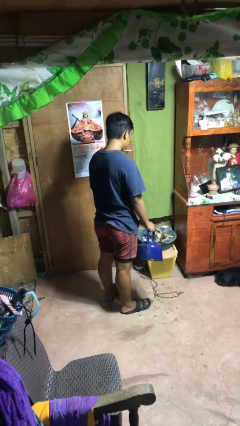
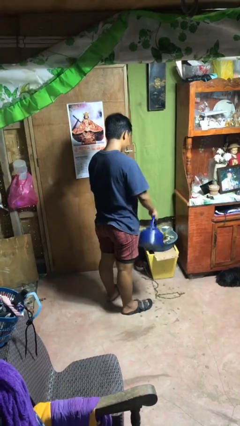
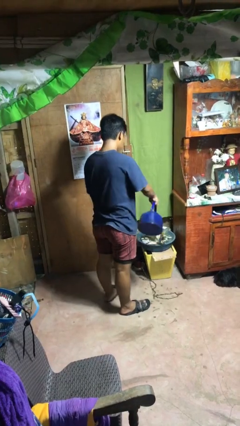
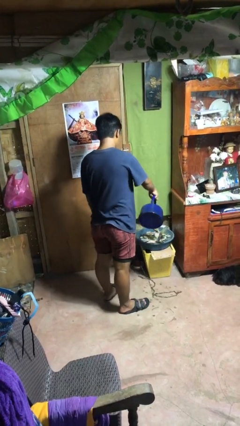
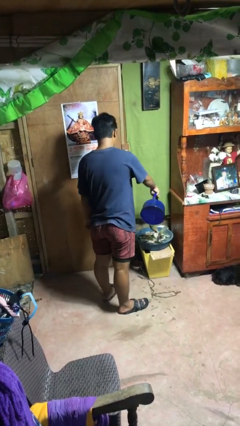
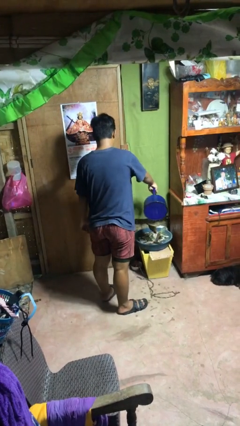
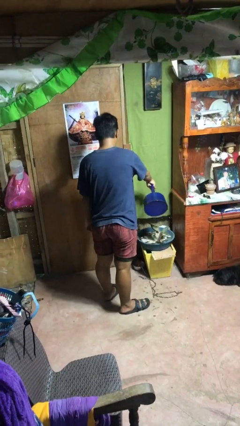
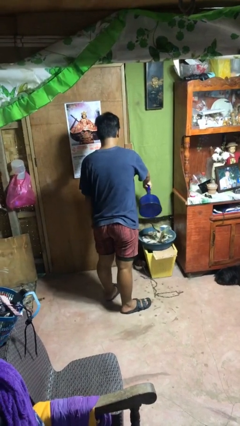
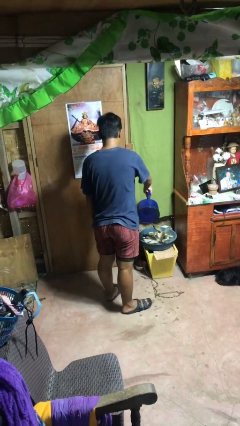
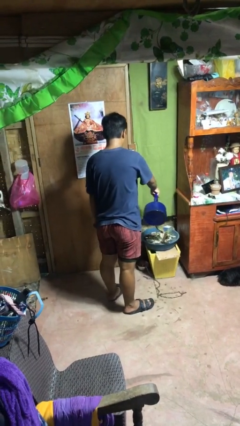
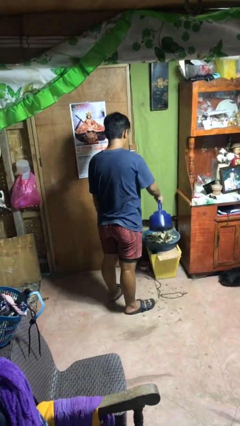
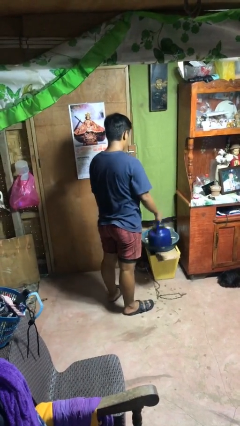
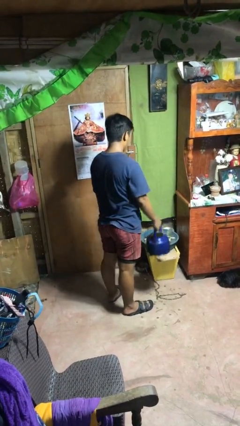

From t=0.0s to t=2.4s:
person waters houseplant

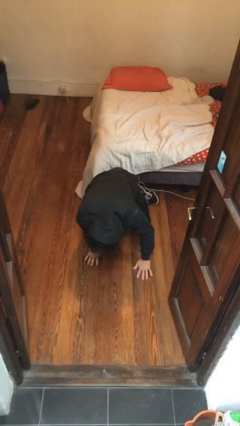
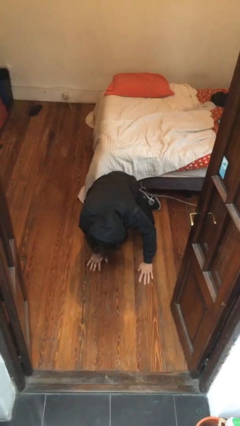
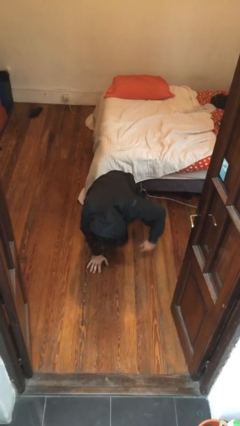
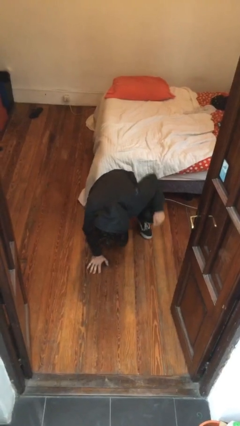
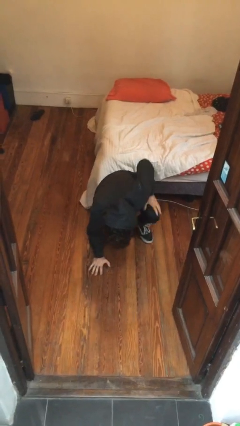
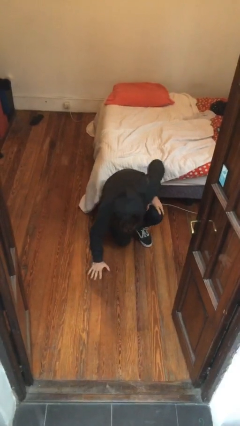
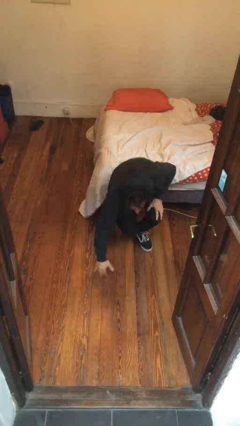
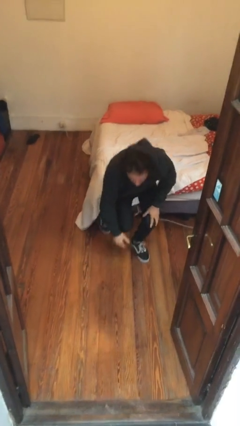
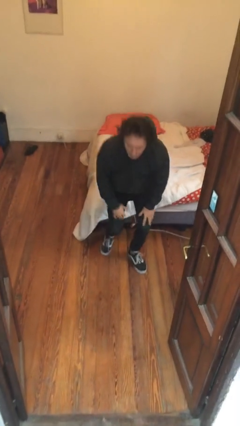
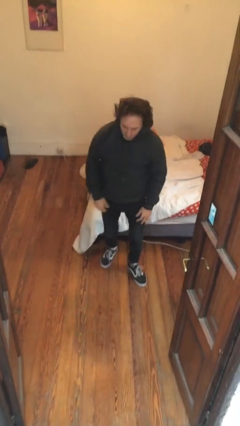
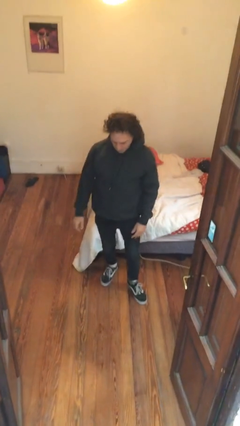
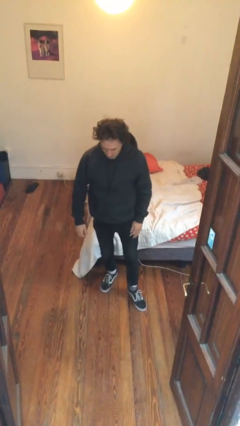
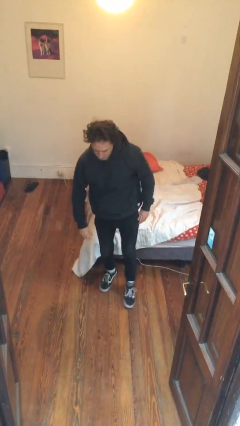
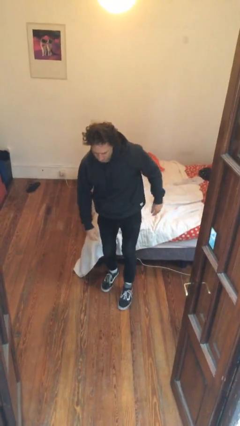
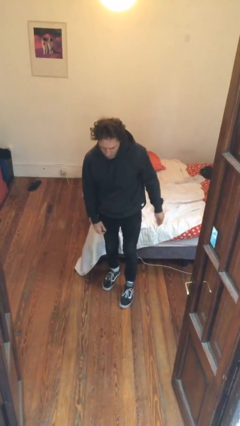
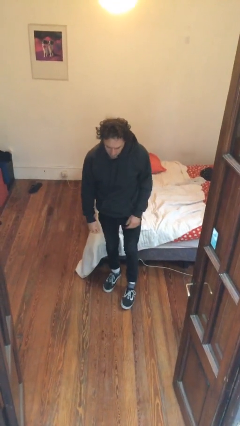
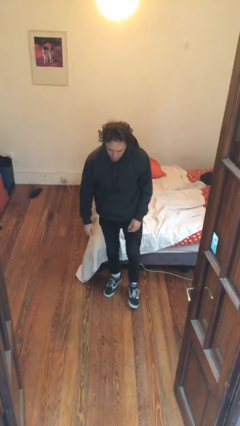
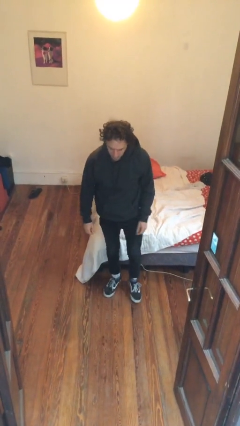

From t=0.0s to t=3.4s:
person stands up from floor

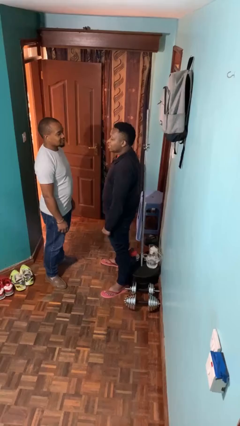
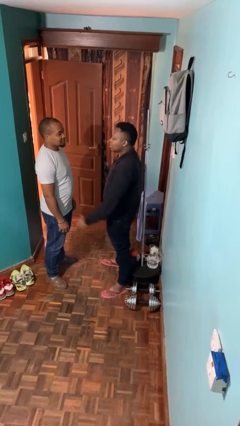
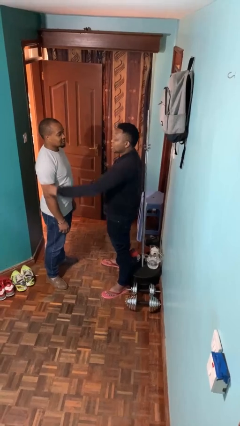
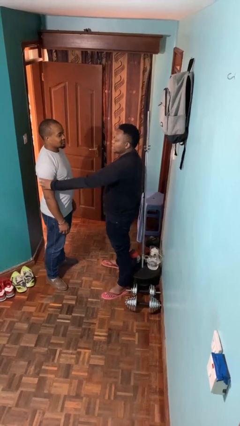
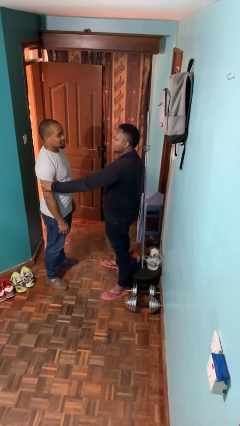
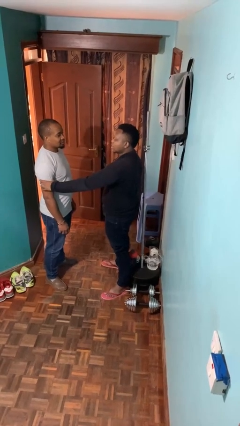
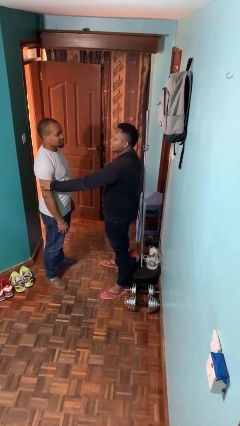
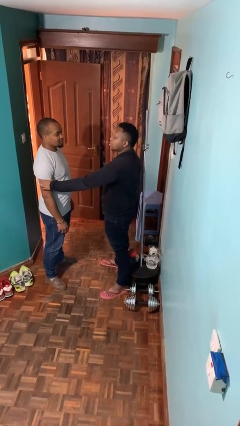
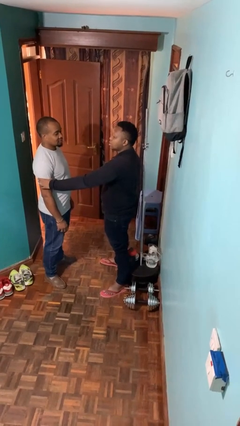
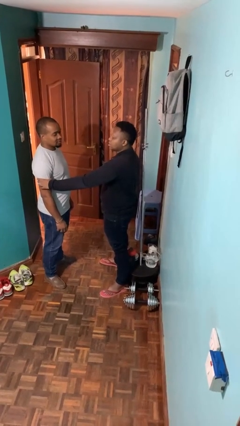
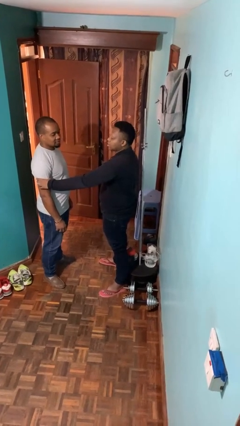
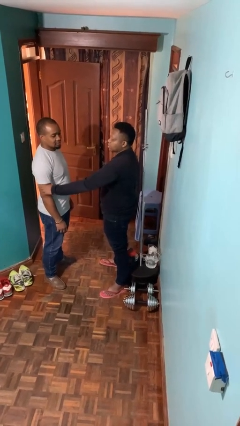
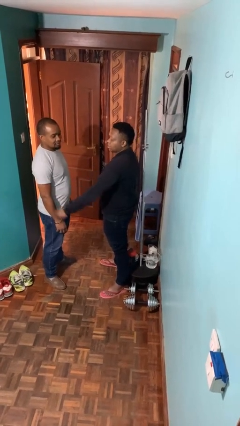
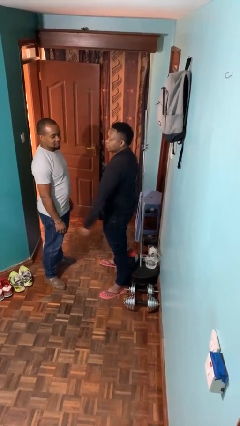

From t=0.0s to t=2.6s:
person grabs person by bicep

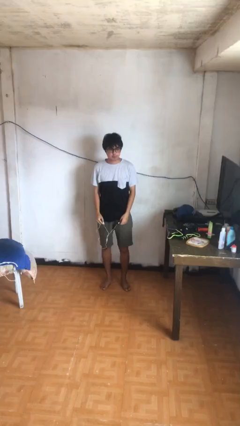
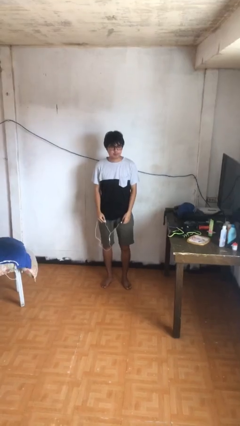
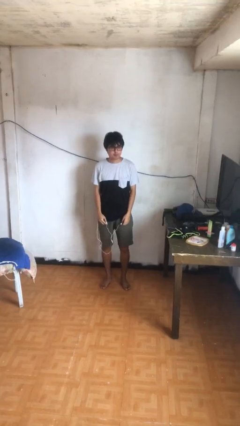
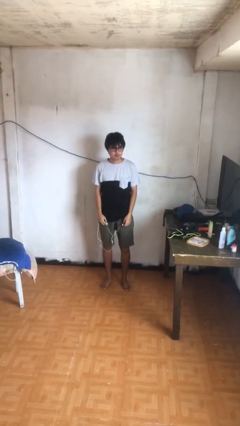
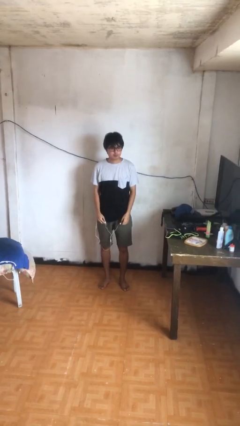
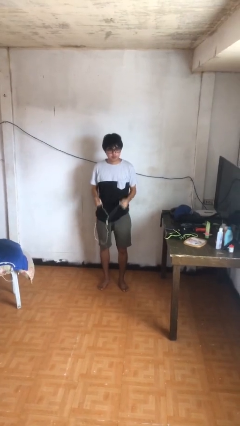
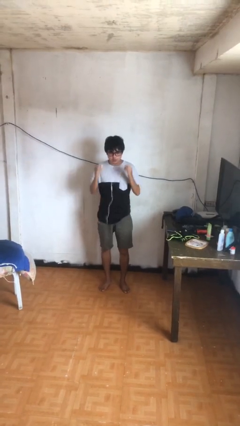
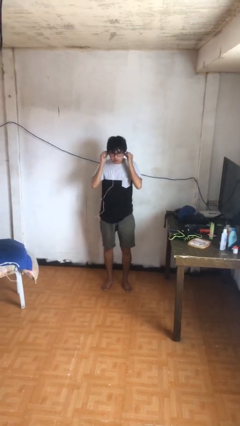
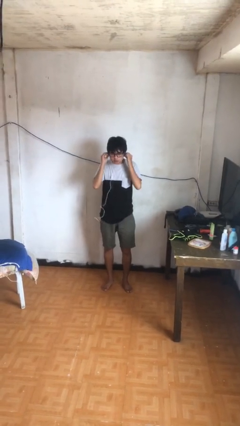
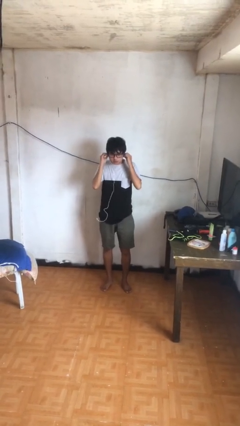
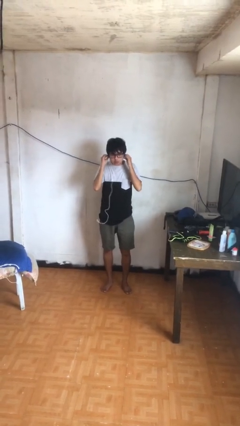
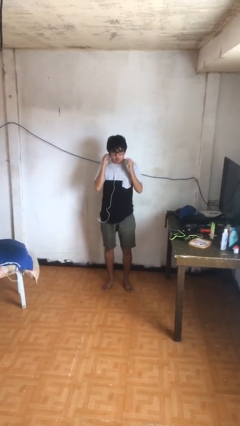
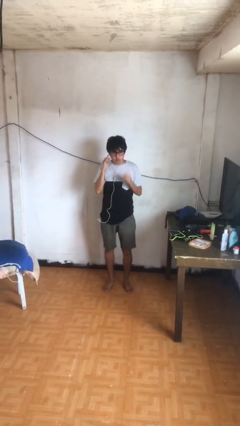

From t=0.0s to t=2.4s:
person puts on headphones

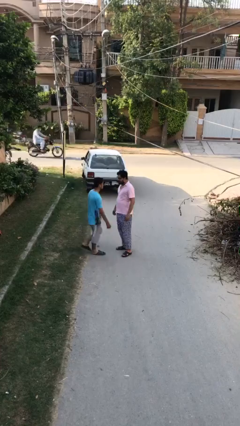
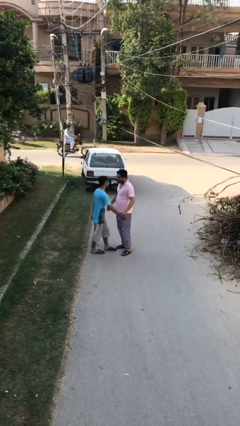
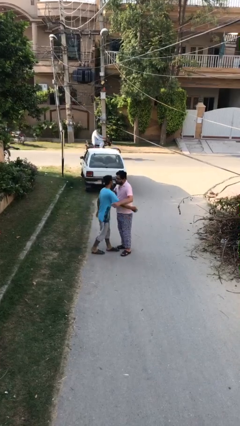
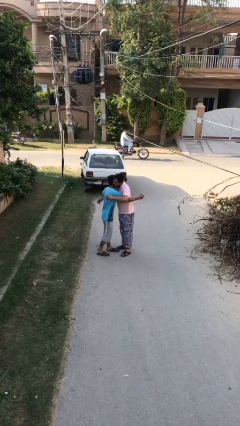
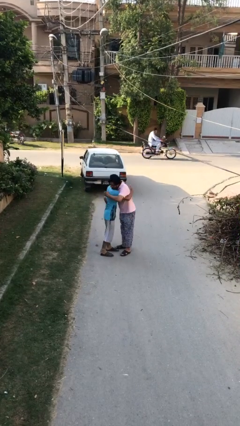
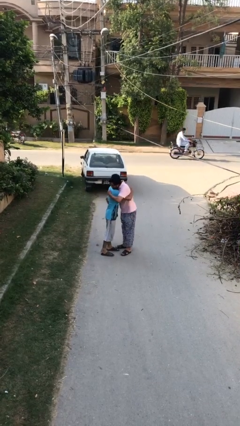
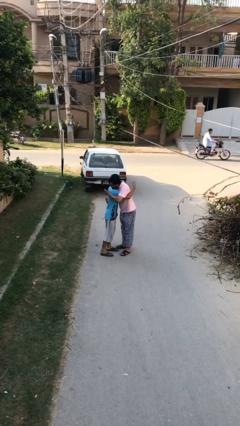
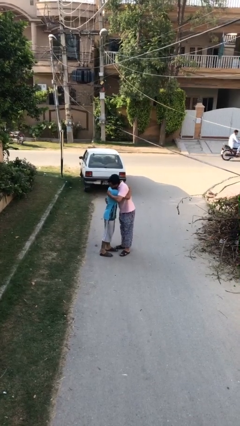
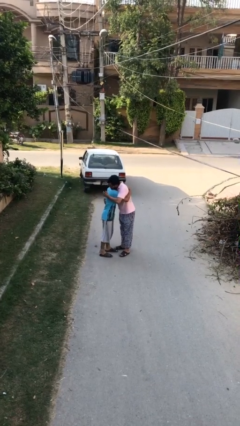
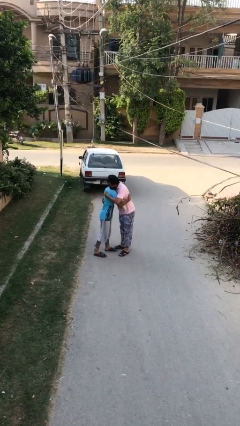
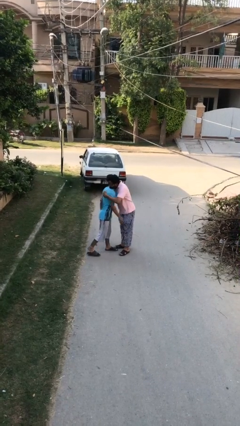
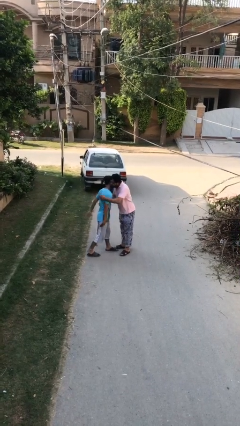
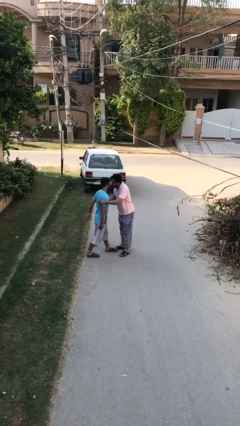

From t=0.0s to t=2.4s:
person embraces person

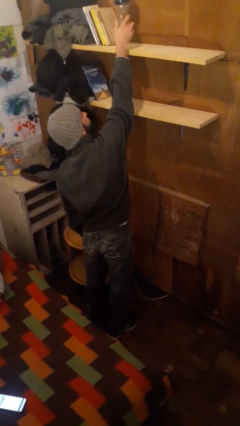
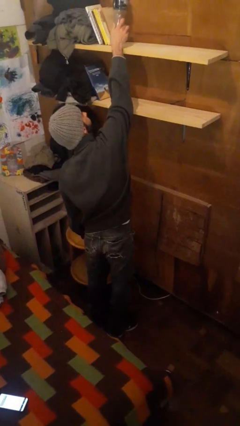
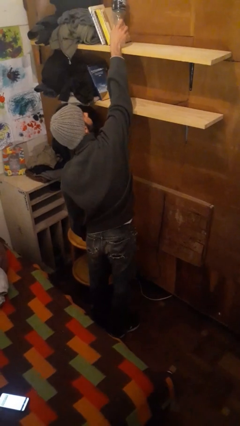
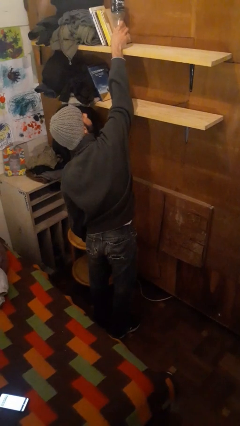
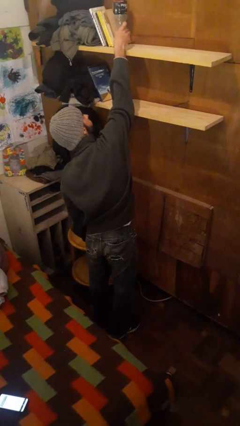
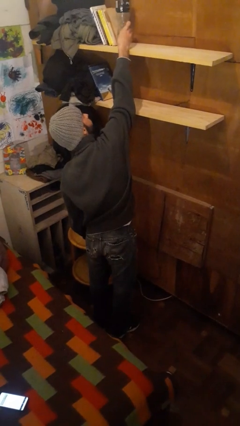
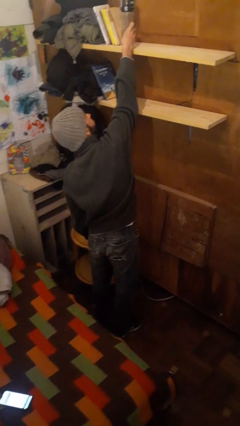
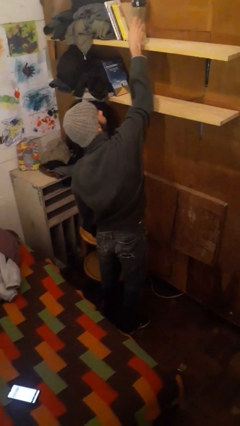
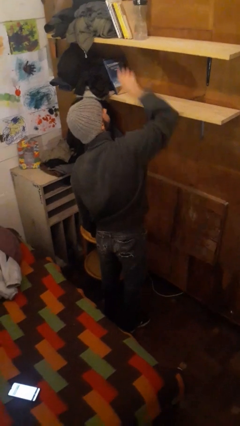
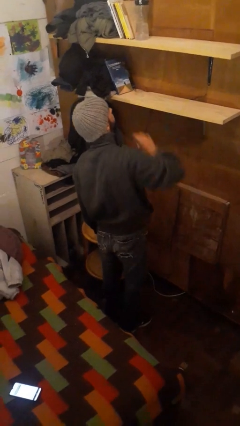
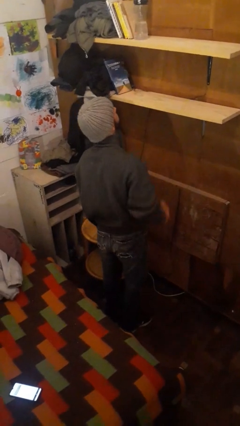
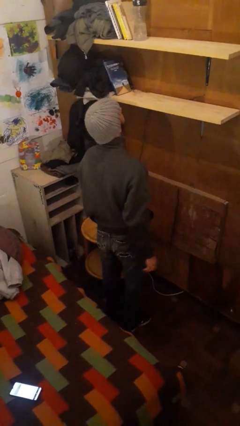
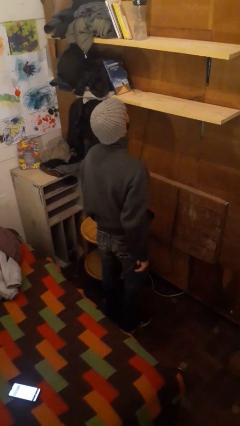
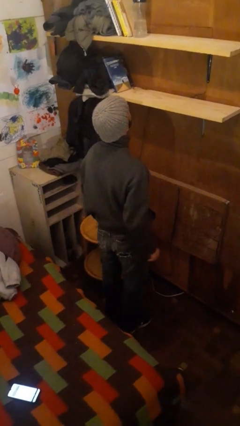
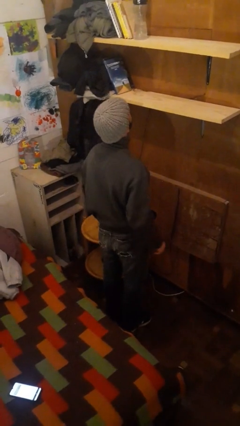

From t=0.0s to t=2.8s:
person puts down object on shelf

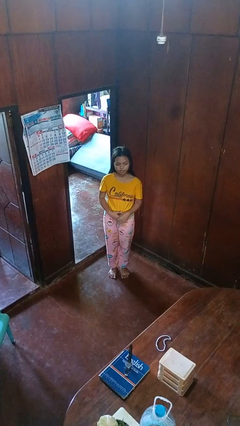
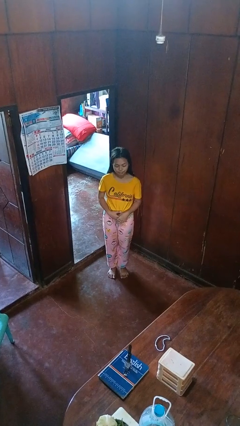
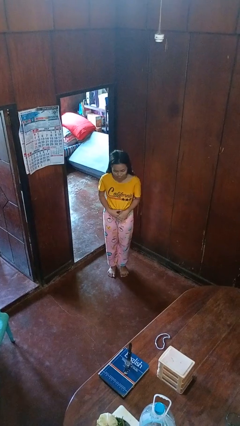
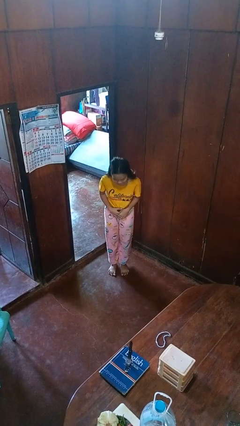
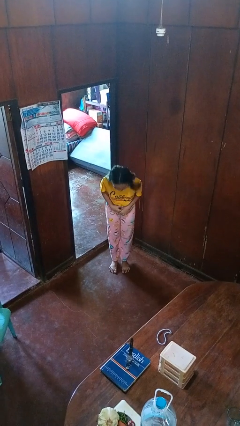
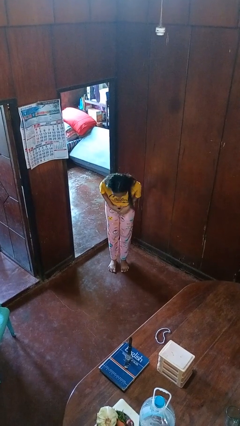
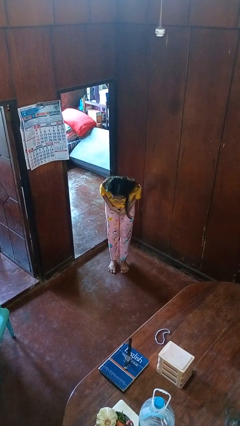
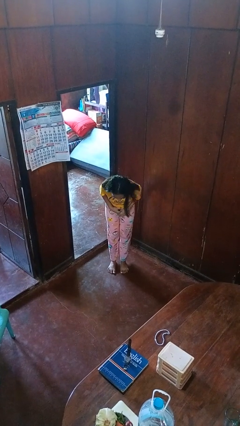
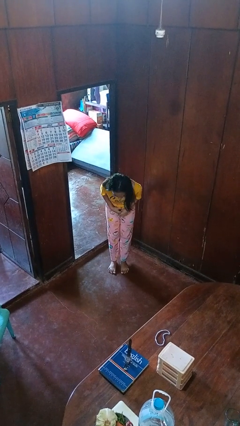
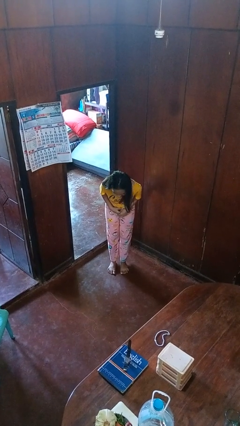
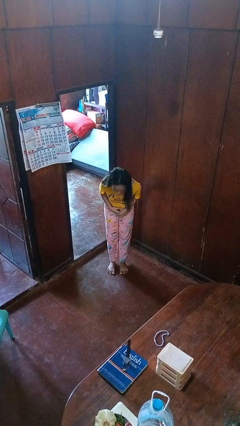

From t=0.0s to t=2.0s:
person bows
